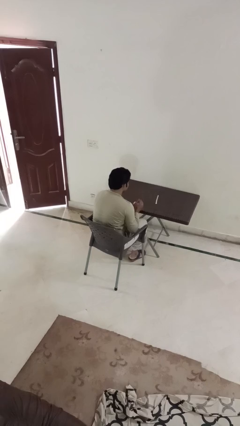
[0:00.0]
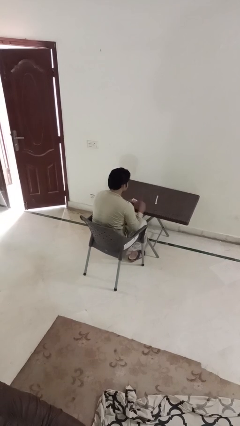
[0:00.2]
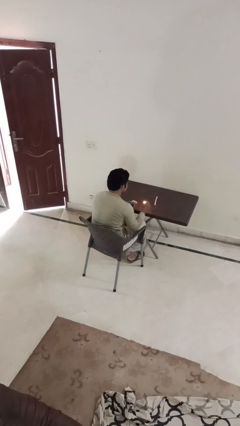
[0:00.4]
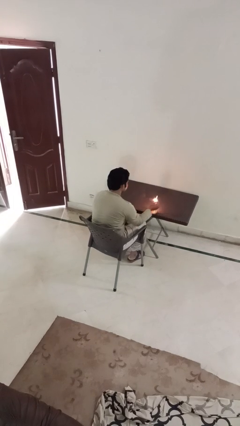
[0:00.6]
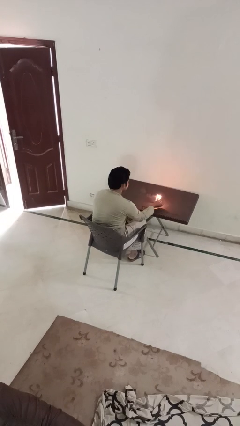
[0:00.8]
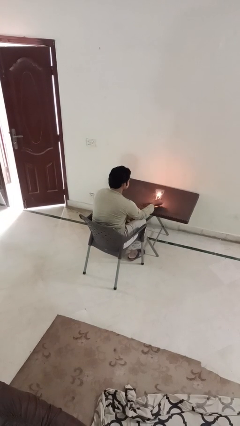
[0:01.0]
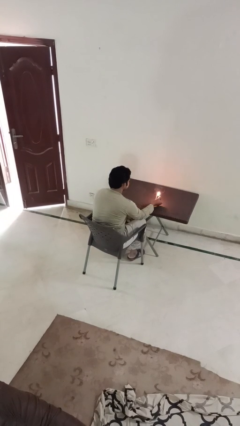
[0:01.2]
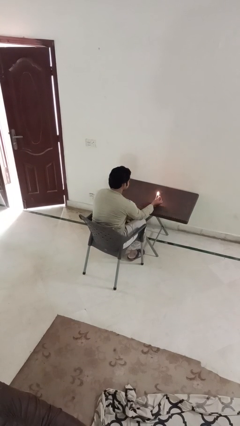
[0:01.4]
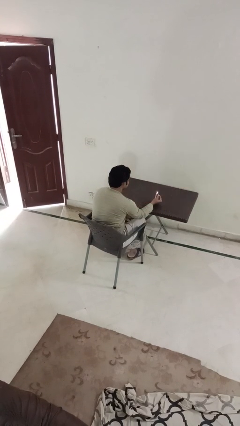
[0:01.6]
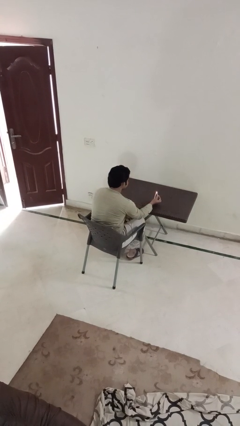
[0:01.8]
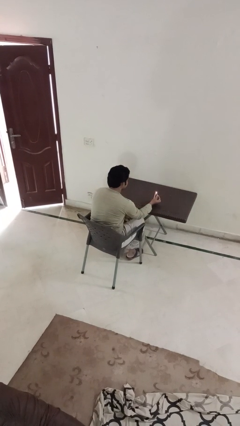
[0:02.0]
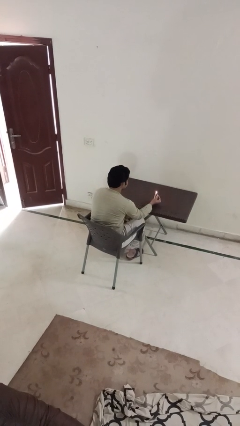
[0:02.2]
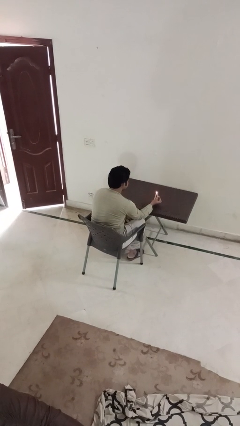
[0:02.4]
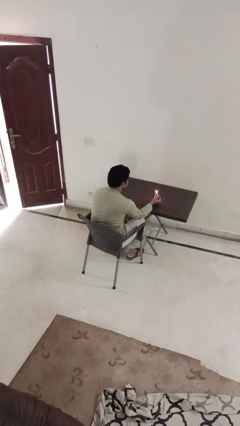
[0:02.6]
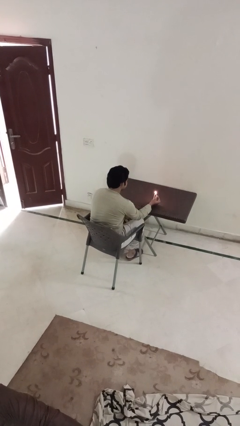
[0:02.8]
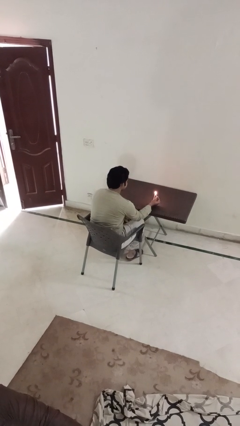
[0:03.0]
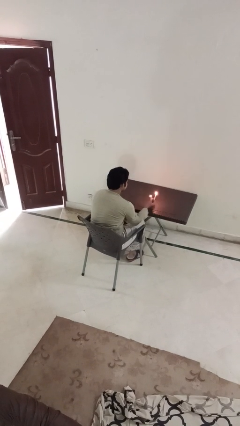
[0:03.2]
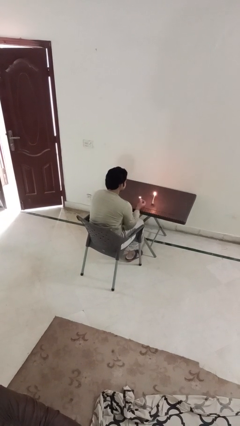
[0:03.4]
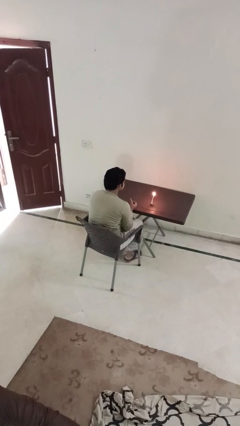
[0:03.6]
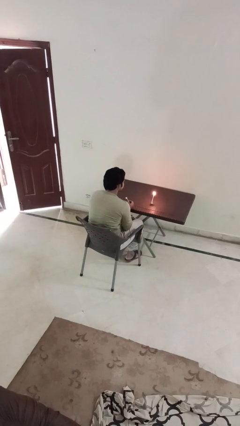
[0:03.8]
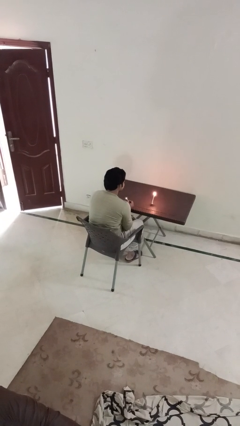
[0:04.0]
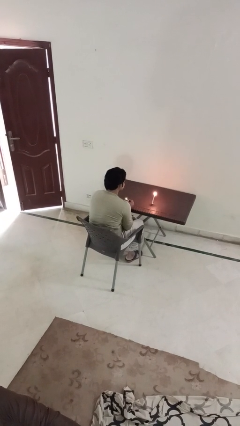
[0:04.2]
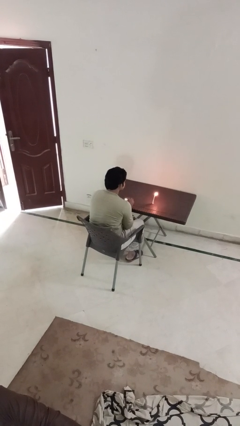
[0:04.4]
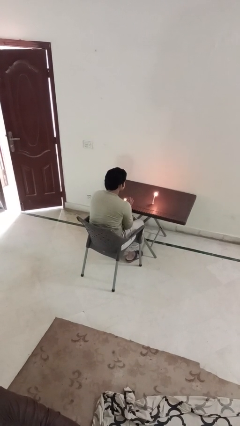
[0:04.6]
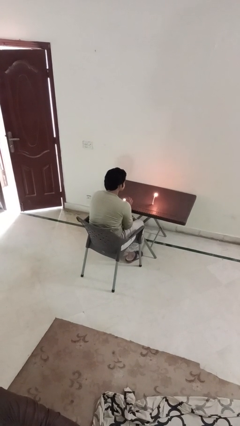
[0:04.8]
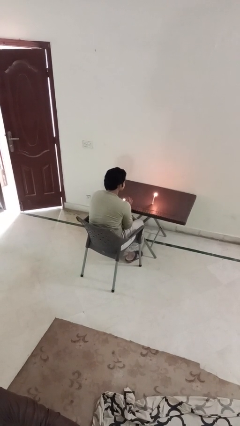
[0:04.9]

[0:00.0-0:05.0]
person lights candle

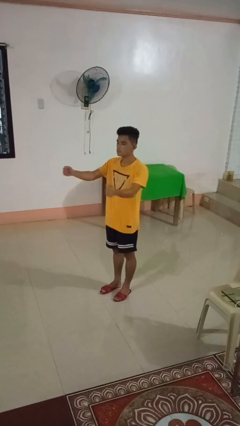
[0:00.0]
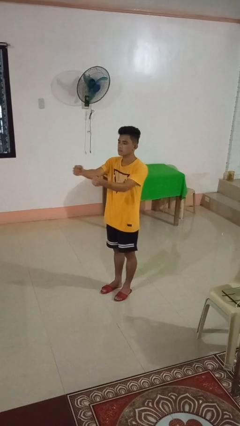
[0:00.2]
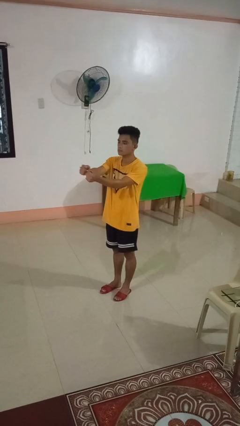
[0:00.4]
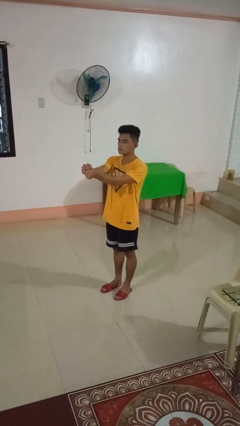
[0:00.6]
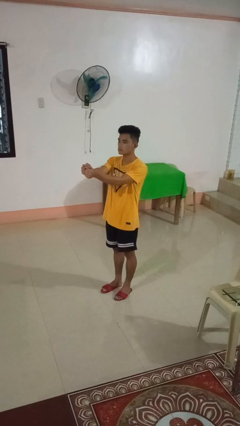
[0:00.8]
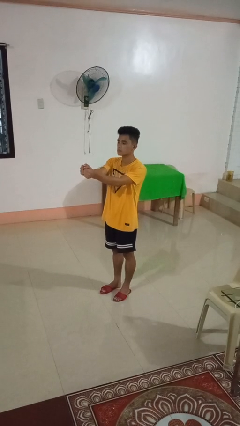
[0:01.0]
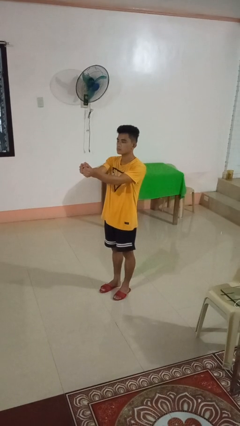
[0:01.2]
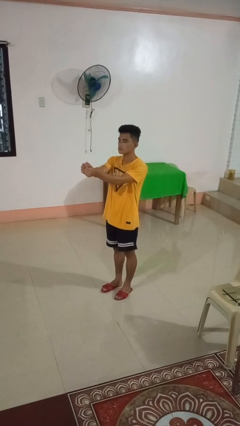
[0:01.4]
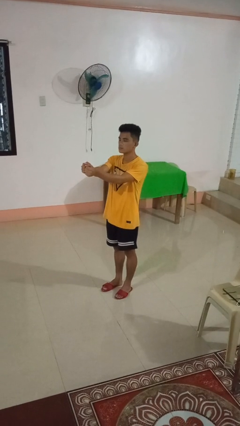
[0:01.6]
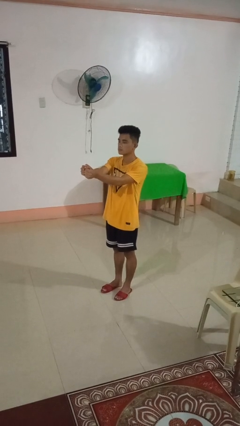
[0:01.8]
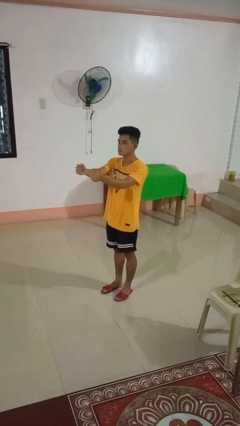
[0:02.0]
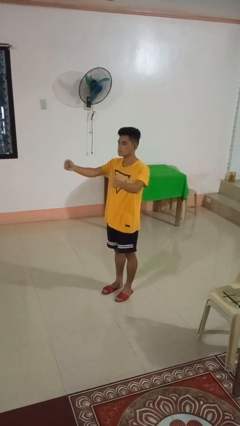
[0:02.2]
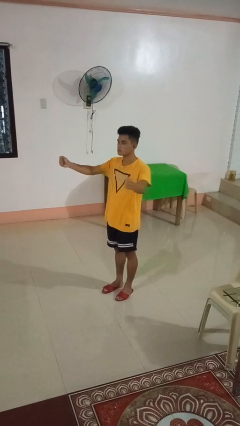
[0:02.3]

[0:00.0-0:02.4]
person gestures zoom in

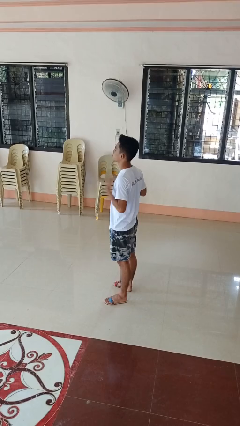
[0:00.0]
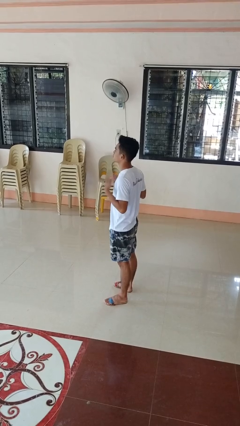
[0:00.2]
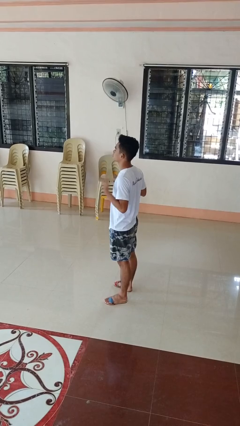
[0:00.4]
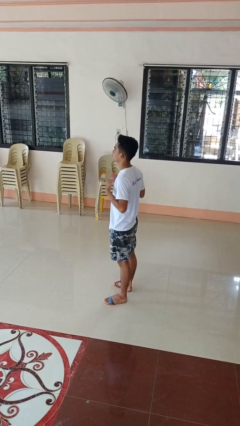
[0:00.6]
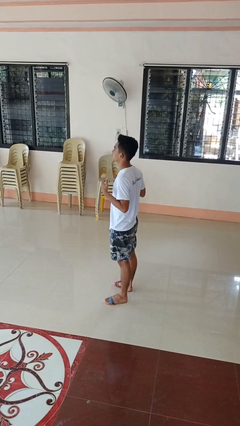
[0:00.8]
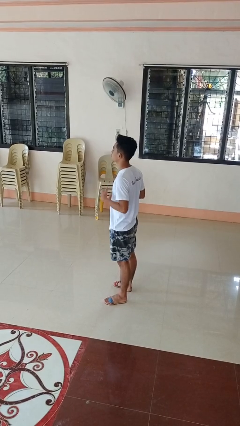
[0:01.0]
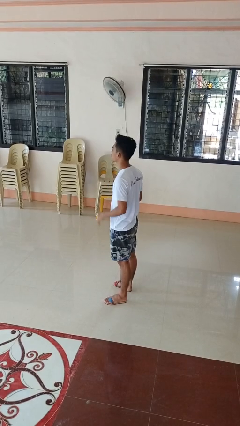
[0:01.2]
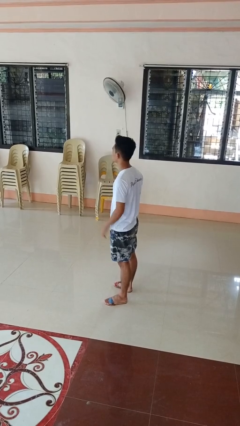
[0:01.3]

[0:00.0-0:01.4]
person drums on chest

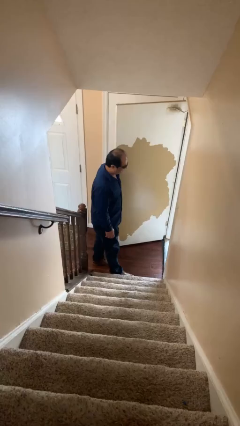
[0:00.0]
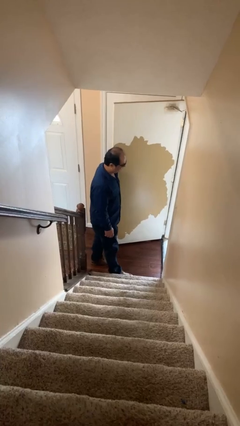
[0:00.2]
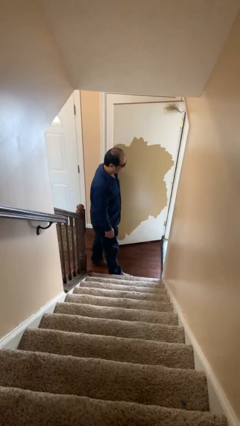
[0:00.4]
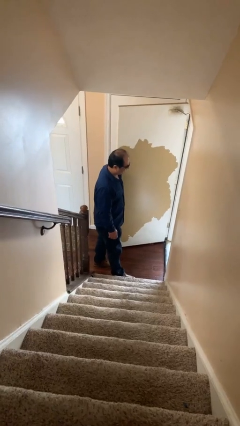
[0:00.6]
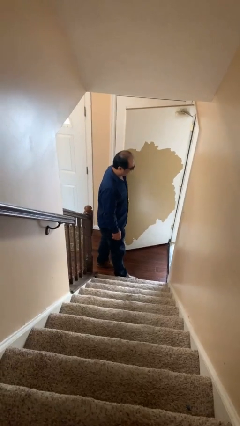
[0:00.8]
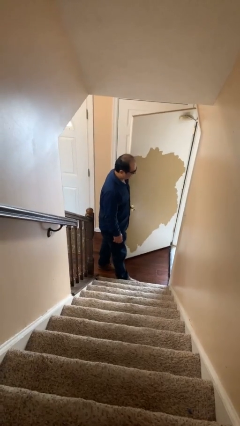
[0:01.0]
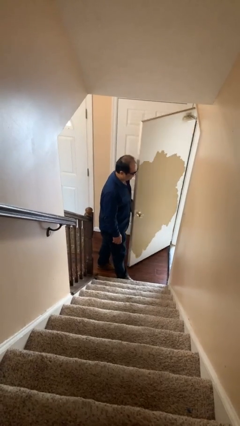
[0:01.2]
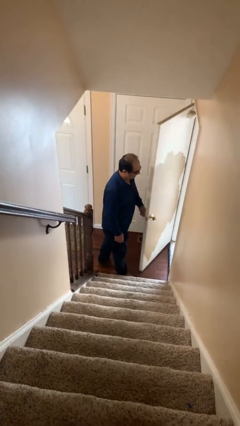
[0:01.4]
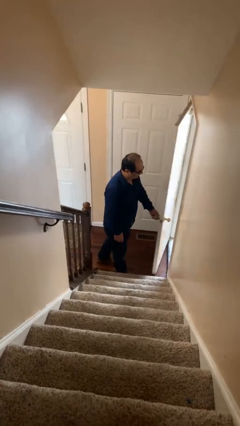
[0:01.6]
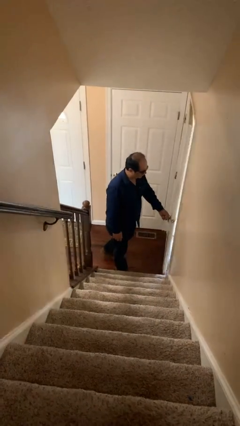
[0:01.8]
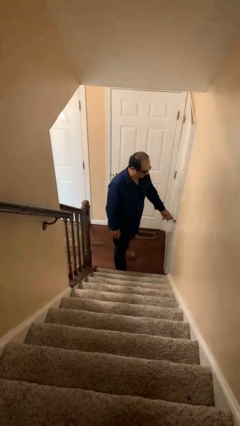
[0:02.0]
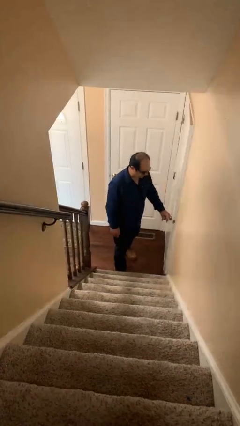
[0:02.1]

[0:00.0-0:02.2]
person closes facility door

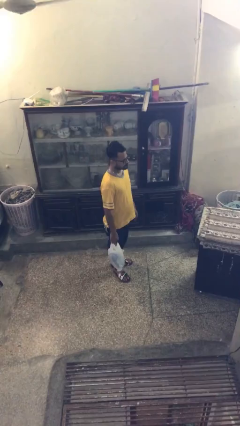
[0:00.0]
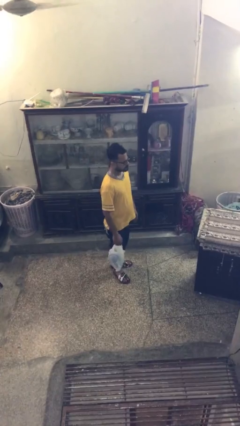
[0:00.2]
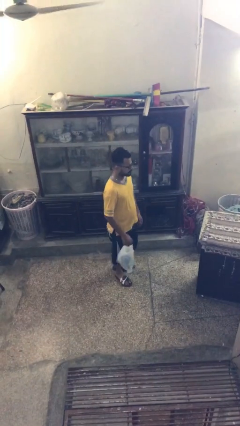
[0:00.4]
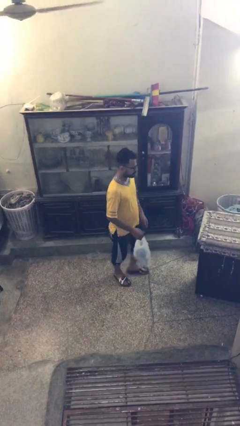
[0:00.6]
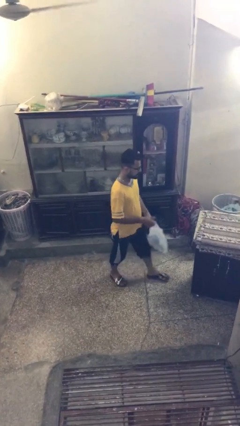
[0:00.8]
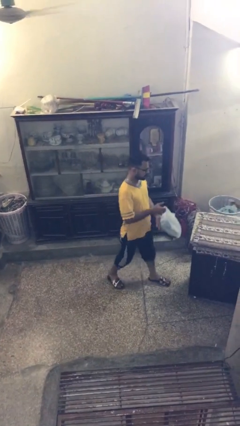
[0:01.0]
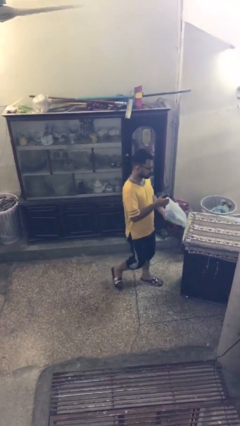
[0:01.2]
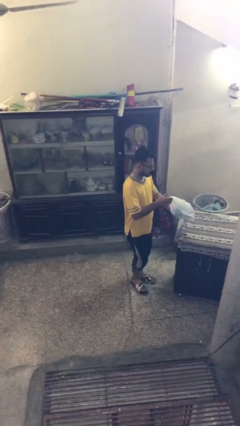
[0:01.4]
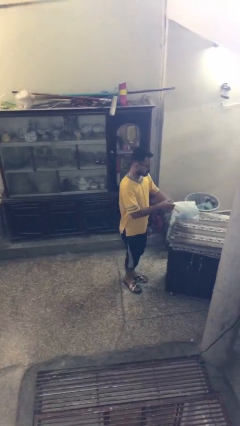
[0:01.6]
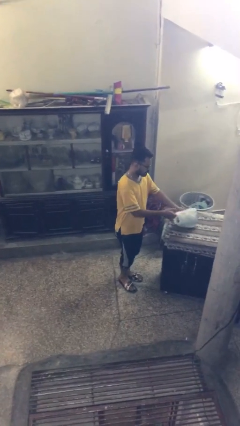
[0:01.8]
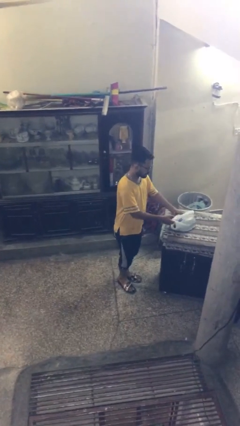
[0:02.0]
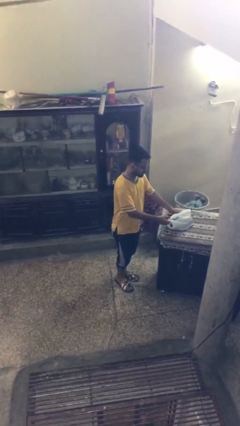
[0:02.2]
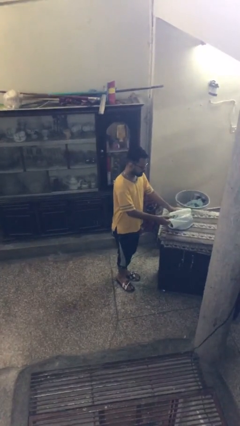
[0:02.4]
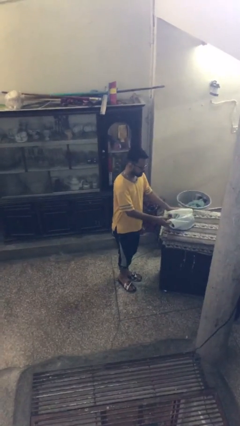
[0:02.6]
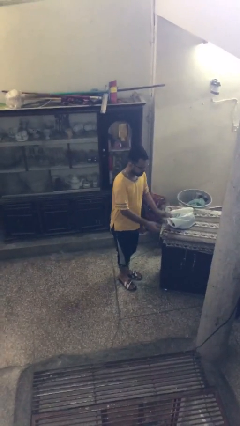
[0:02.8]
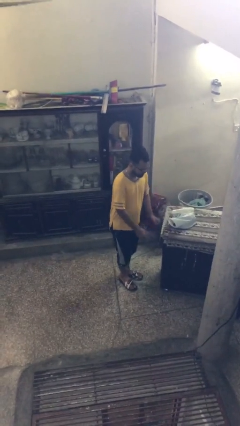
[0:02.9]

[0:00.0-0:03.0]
person puts down object on table

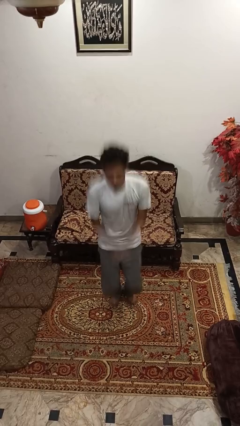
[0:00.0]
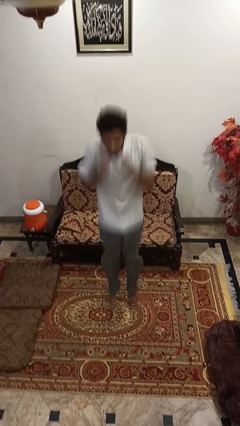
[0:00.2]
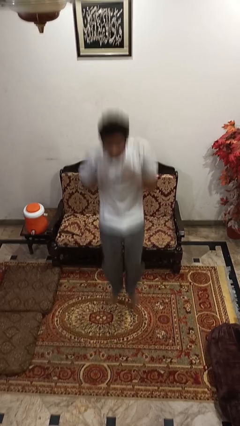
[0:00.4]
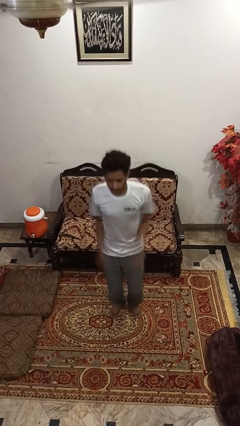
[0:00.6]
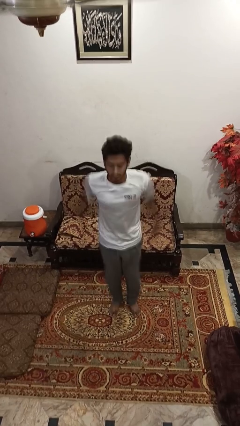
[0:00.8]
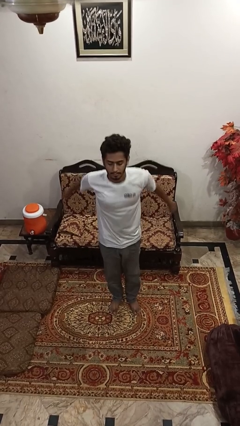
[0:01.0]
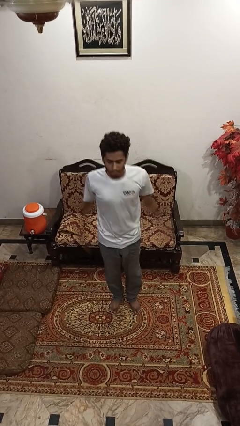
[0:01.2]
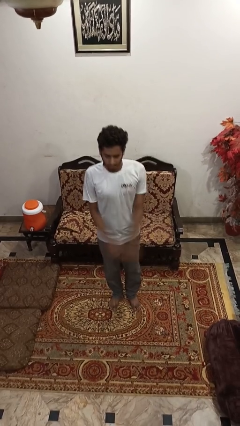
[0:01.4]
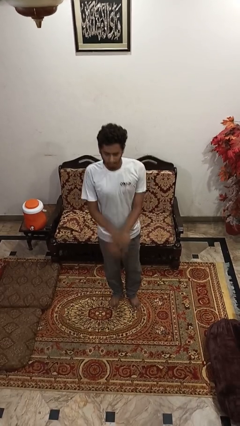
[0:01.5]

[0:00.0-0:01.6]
person jumps

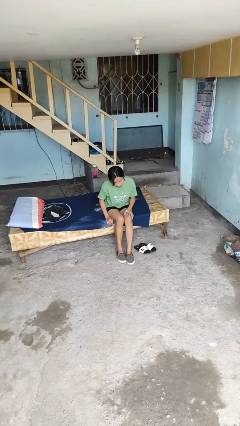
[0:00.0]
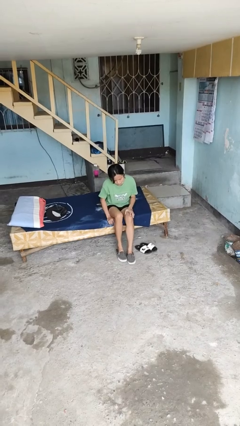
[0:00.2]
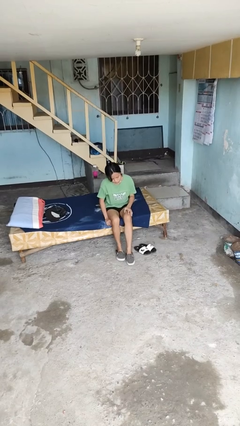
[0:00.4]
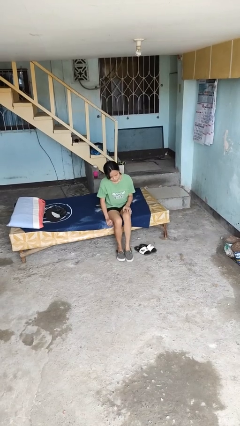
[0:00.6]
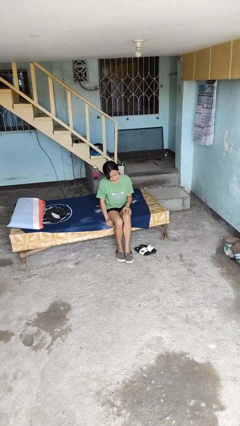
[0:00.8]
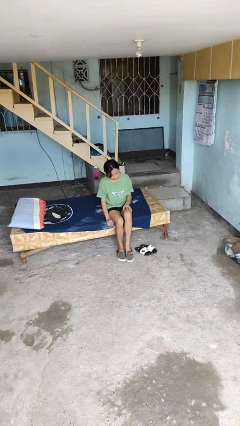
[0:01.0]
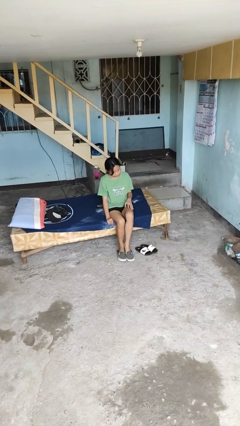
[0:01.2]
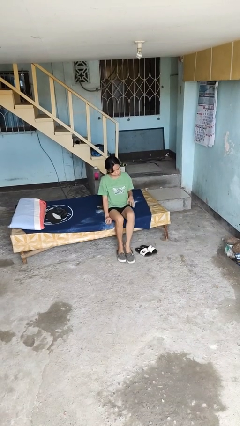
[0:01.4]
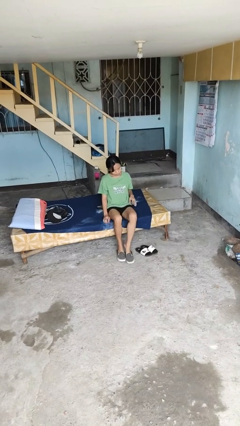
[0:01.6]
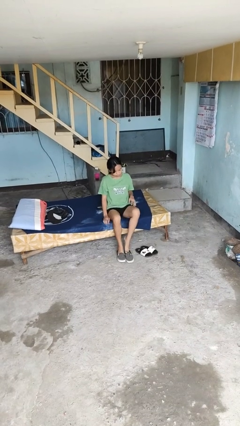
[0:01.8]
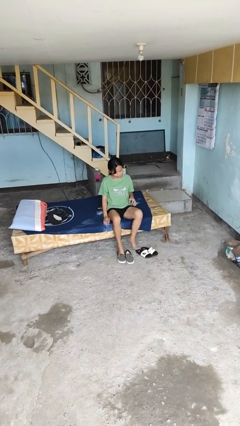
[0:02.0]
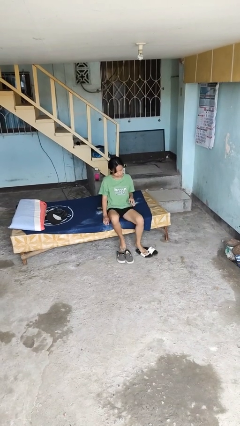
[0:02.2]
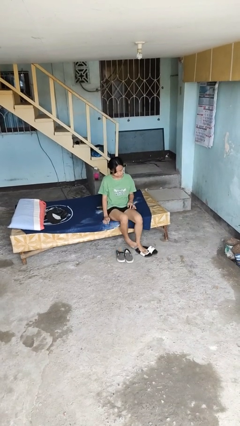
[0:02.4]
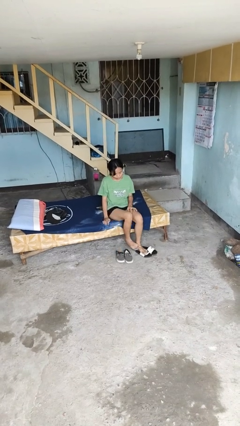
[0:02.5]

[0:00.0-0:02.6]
person takes off shoes
